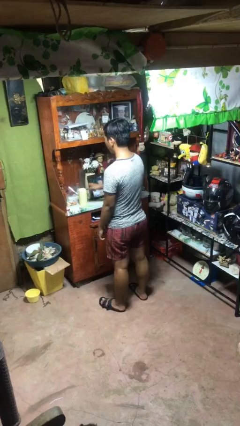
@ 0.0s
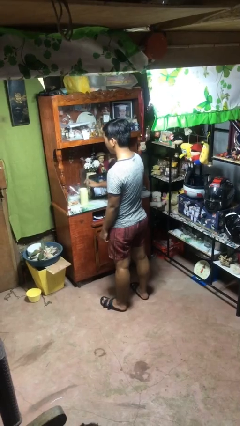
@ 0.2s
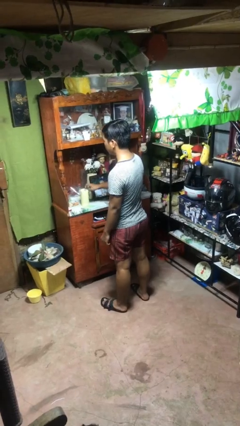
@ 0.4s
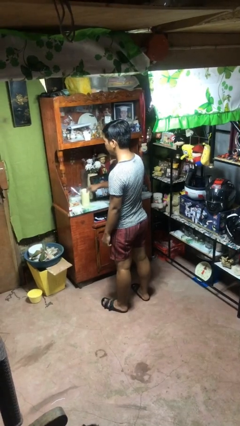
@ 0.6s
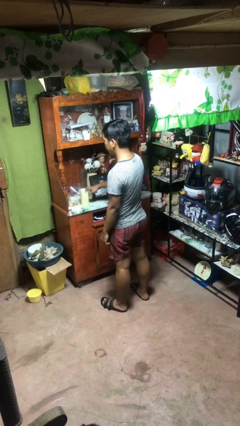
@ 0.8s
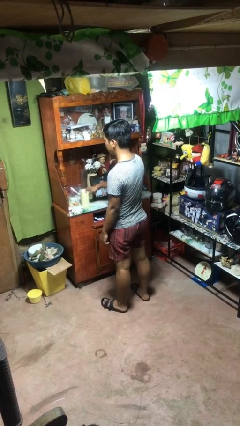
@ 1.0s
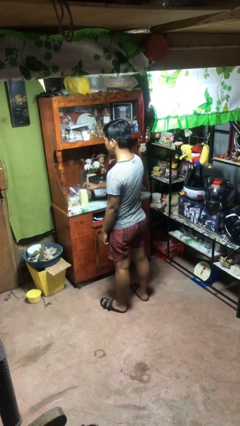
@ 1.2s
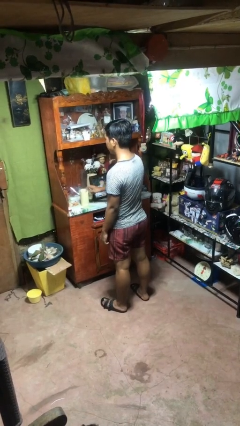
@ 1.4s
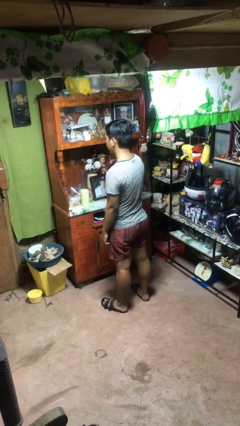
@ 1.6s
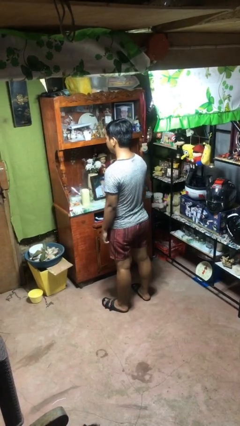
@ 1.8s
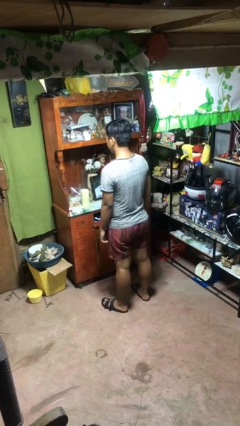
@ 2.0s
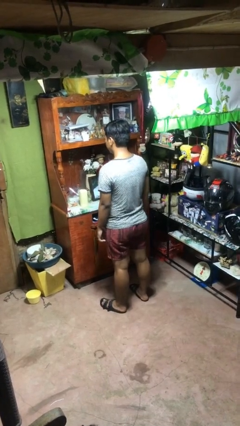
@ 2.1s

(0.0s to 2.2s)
person taps object with finger

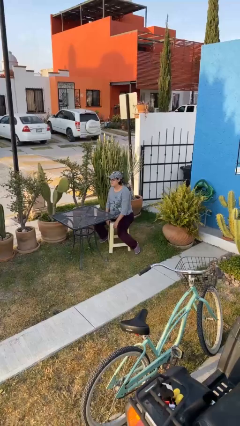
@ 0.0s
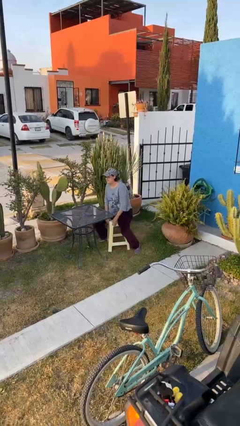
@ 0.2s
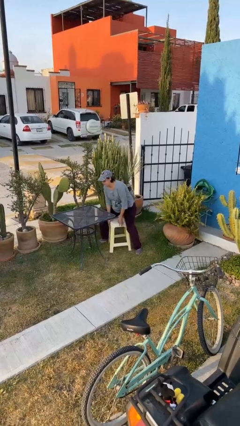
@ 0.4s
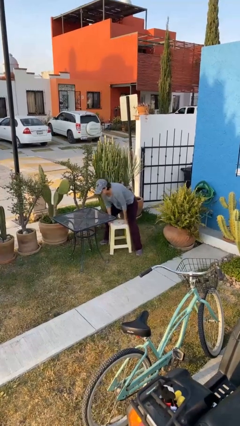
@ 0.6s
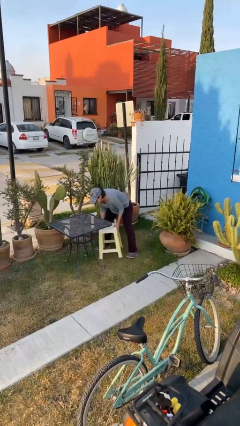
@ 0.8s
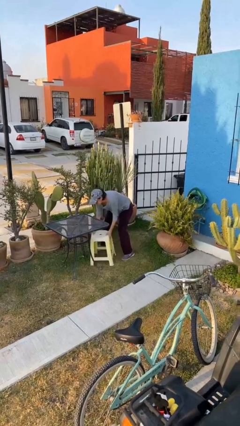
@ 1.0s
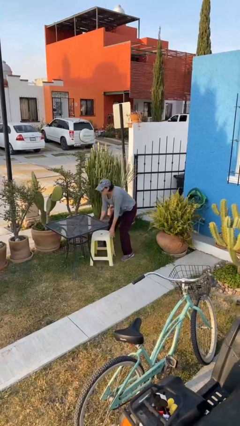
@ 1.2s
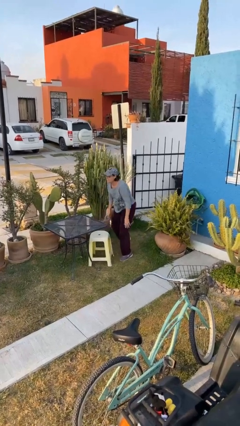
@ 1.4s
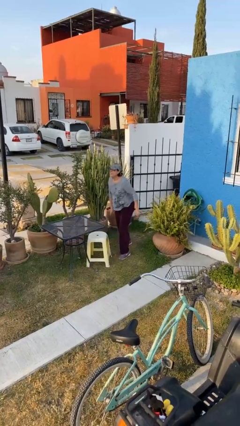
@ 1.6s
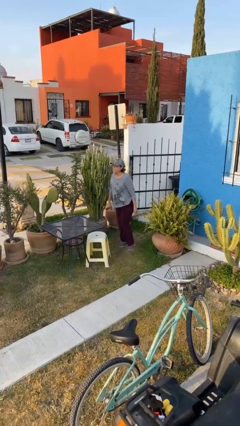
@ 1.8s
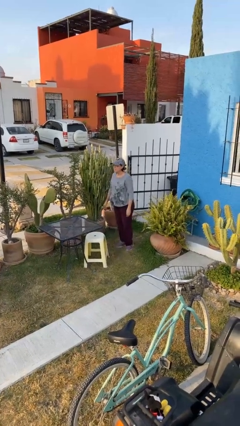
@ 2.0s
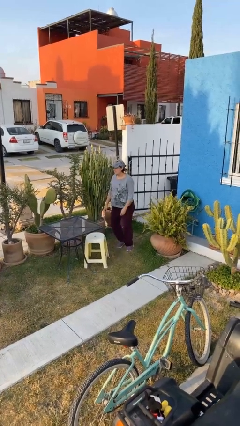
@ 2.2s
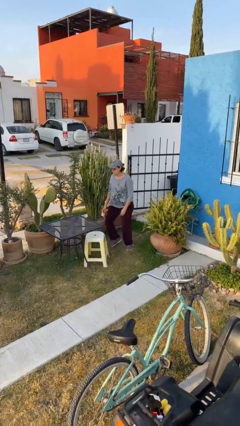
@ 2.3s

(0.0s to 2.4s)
person stands up

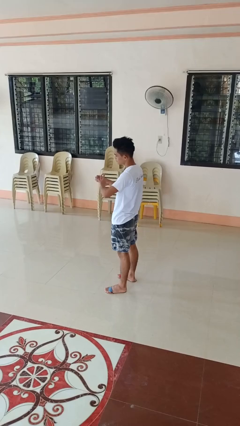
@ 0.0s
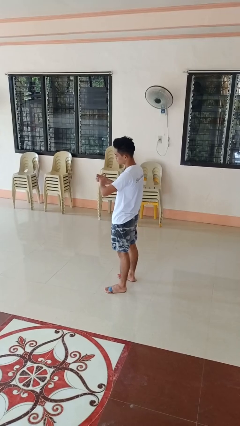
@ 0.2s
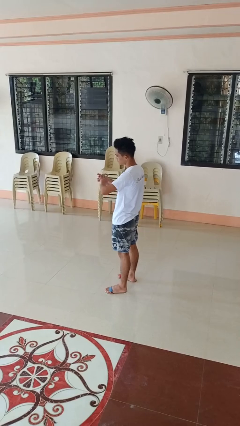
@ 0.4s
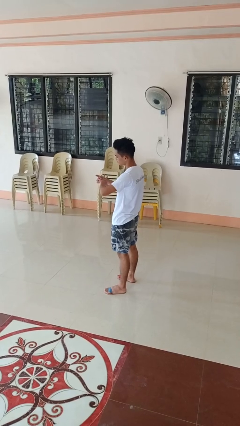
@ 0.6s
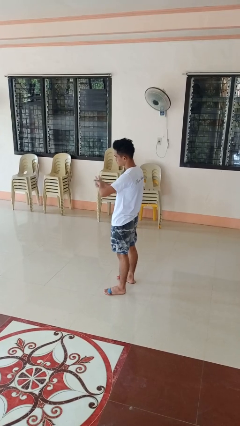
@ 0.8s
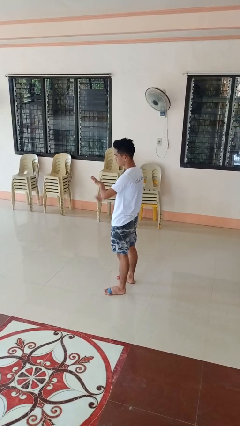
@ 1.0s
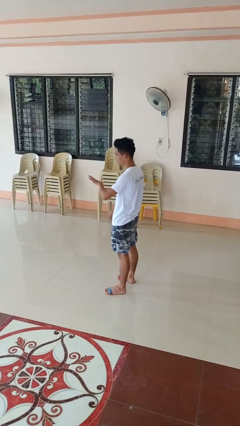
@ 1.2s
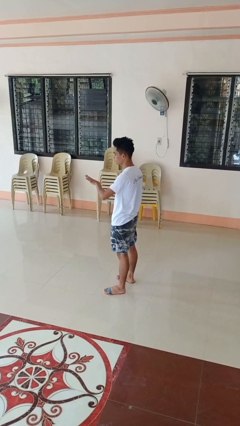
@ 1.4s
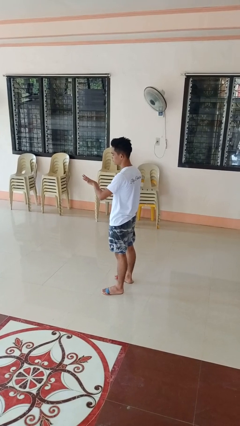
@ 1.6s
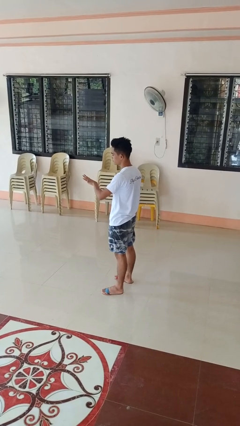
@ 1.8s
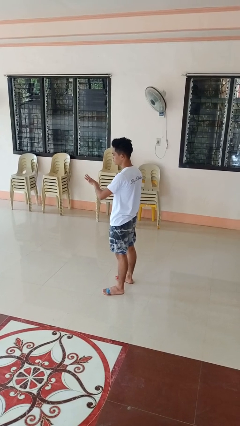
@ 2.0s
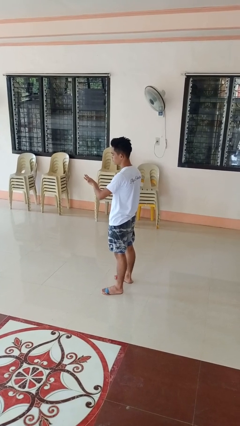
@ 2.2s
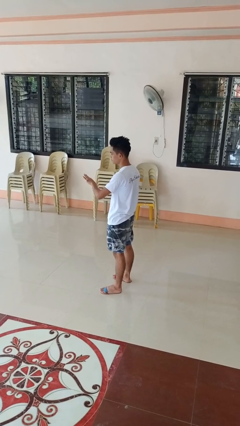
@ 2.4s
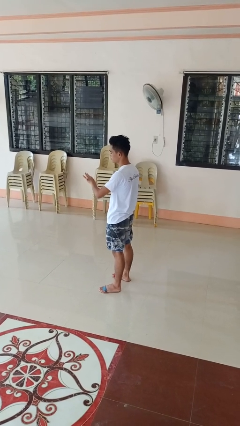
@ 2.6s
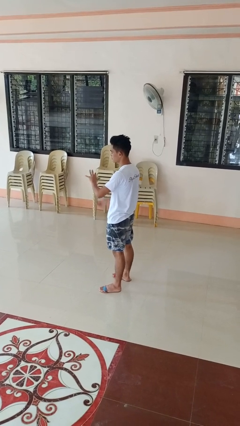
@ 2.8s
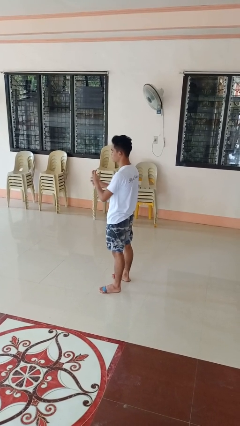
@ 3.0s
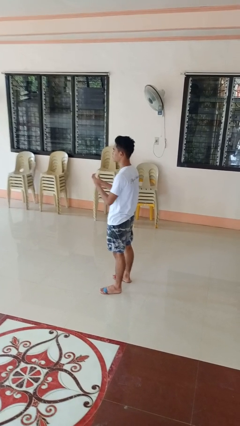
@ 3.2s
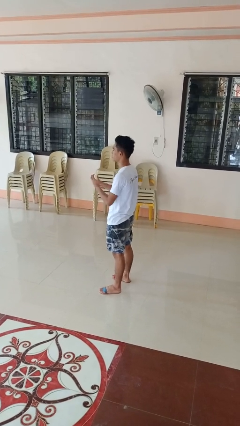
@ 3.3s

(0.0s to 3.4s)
person puts on ring

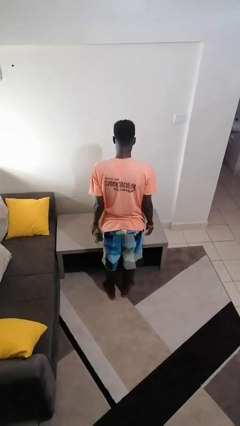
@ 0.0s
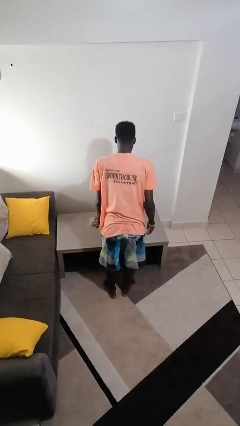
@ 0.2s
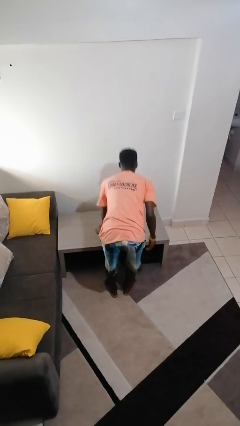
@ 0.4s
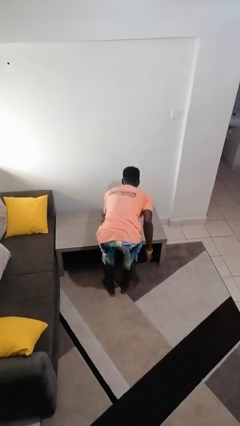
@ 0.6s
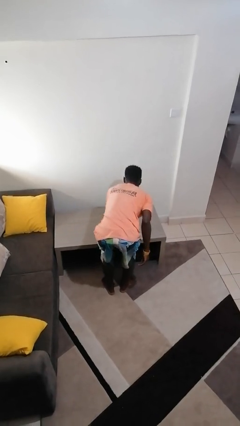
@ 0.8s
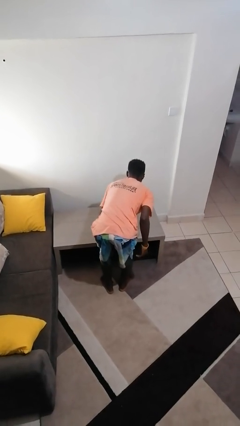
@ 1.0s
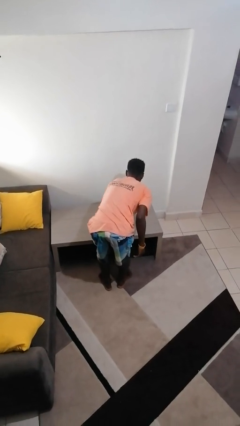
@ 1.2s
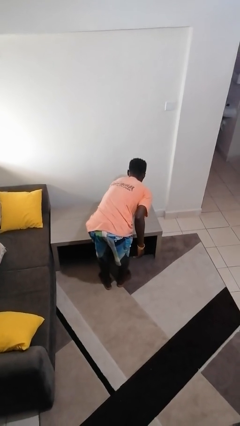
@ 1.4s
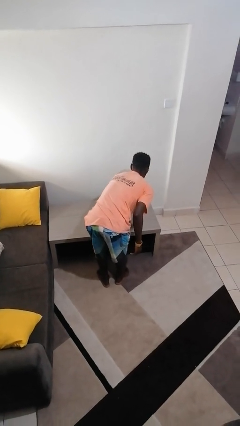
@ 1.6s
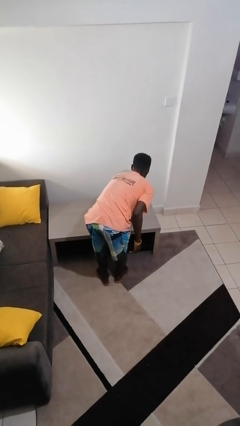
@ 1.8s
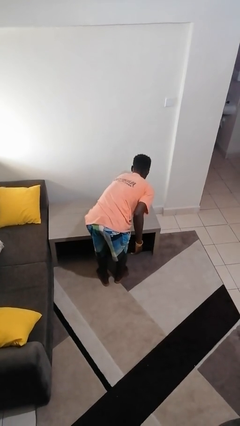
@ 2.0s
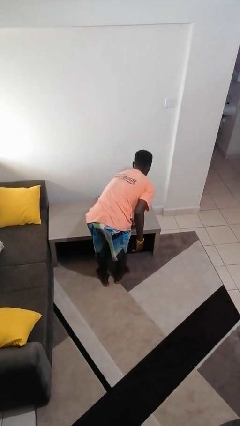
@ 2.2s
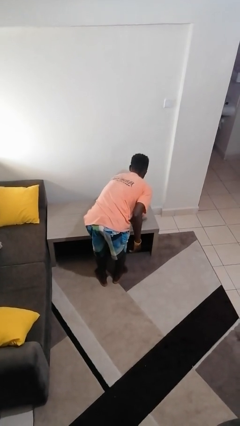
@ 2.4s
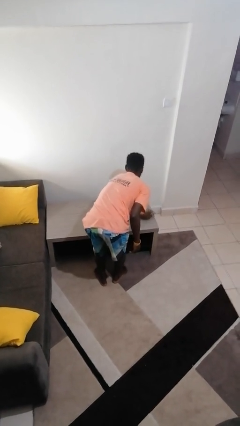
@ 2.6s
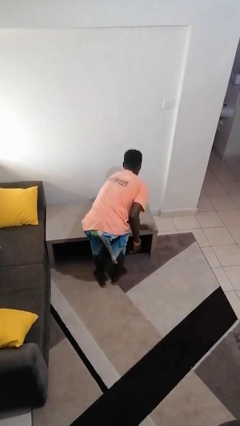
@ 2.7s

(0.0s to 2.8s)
person cleans table with rag

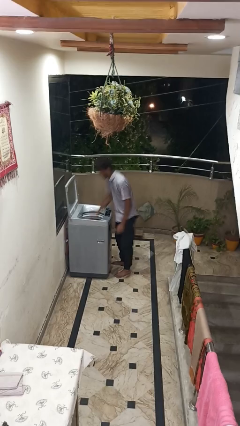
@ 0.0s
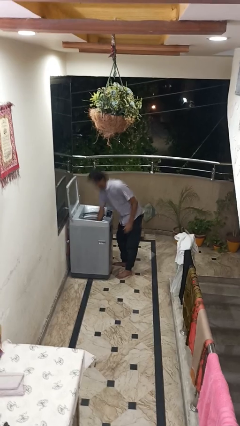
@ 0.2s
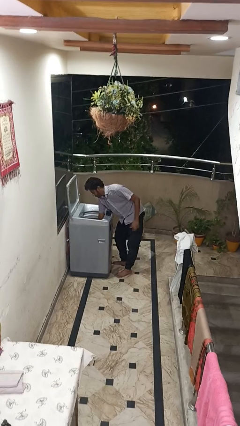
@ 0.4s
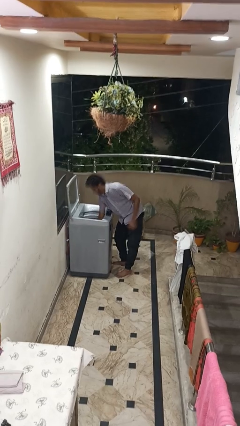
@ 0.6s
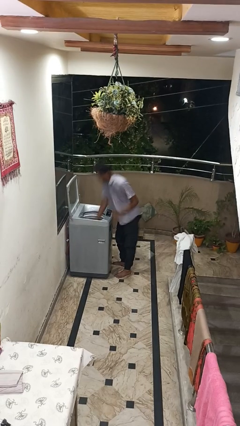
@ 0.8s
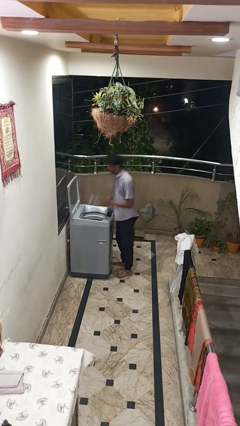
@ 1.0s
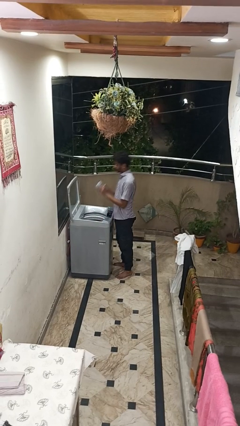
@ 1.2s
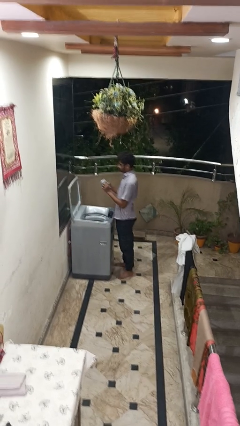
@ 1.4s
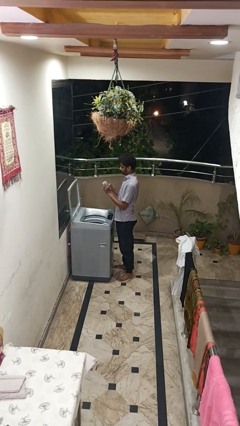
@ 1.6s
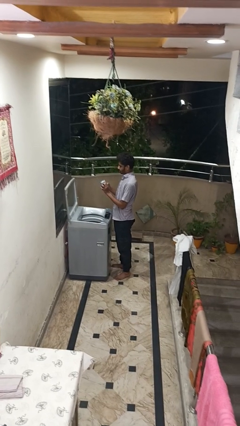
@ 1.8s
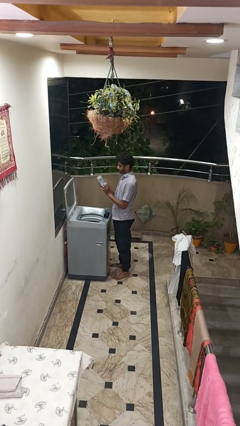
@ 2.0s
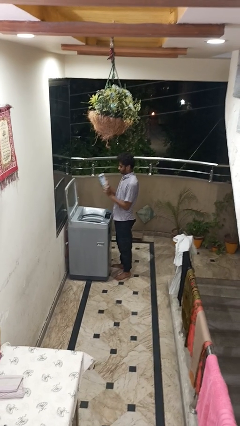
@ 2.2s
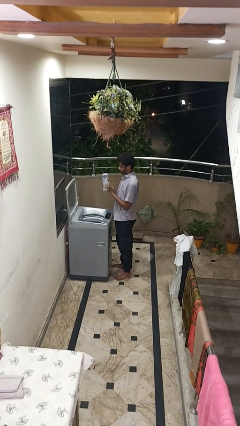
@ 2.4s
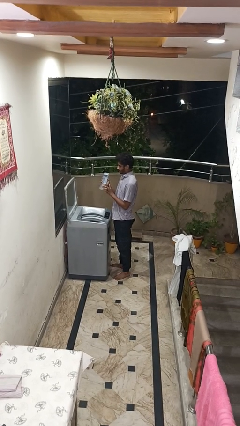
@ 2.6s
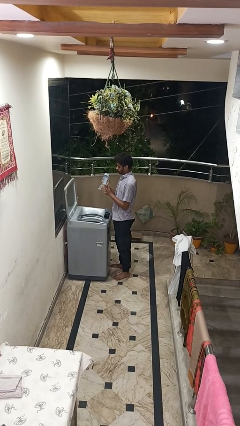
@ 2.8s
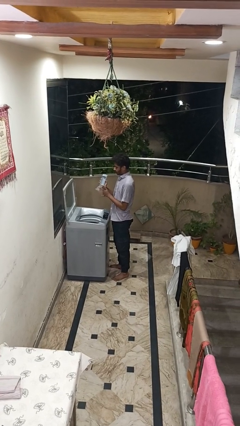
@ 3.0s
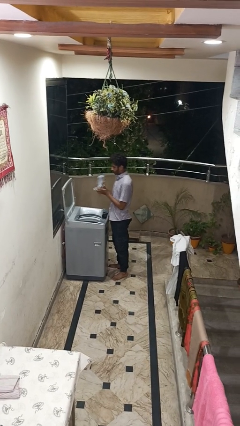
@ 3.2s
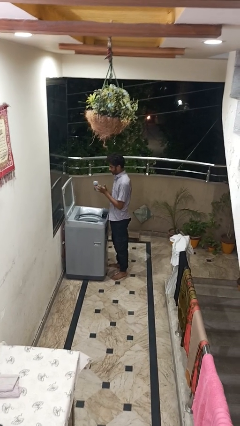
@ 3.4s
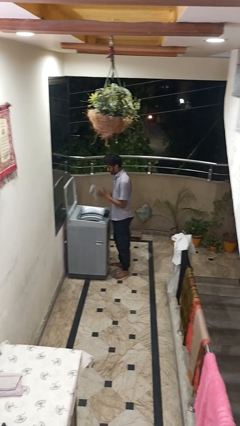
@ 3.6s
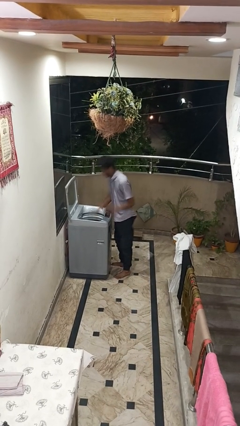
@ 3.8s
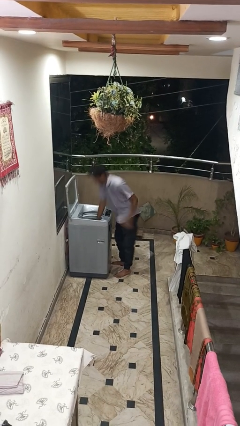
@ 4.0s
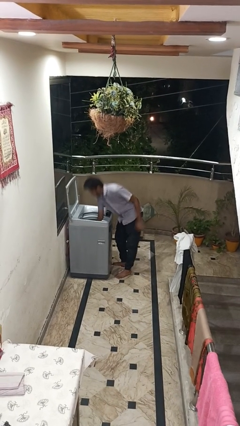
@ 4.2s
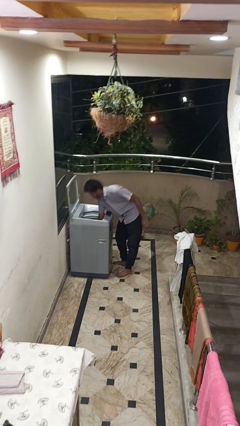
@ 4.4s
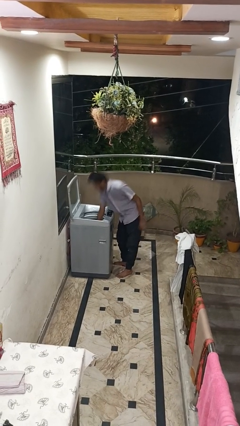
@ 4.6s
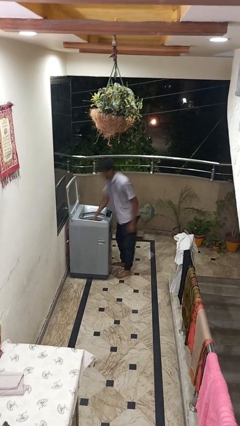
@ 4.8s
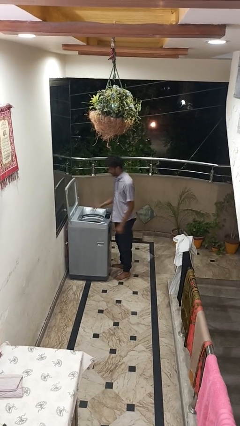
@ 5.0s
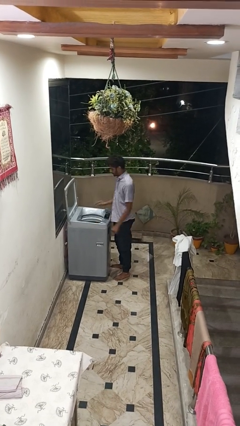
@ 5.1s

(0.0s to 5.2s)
person cleans dryer lint trap

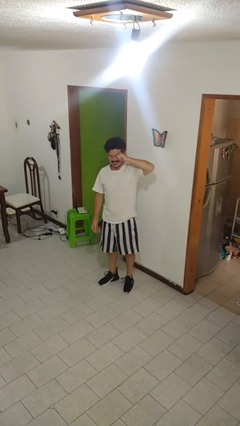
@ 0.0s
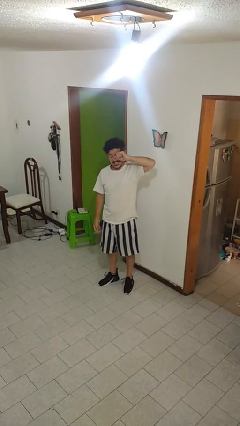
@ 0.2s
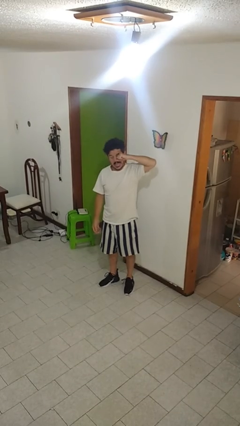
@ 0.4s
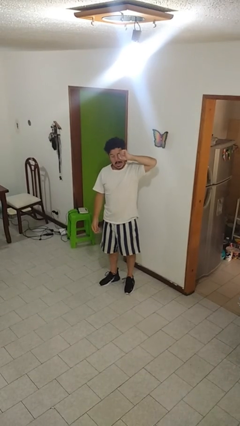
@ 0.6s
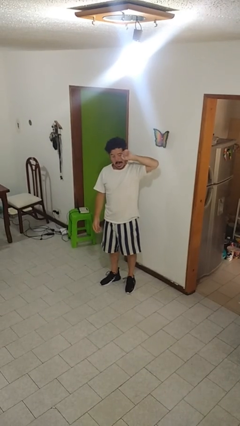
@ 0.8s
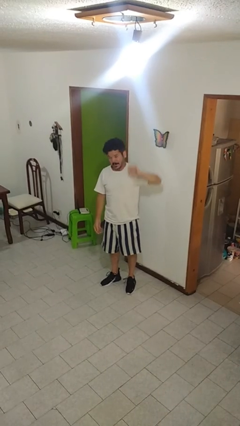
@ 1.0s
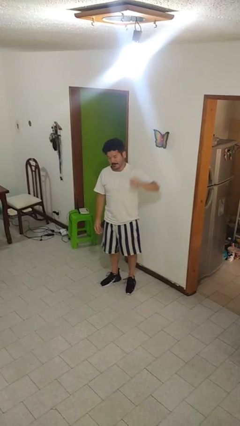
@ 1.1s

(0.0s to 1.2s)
person rubs eyes

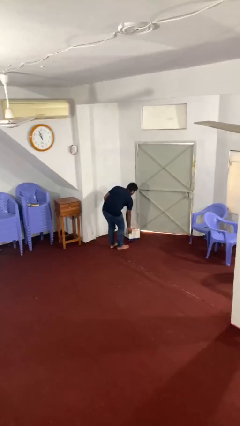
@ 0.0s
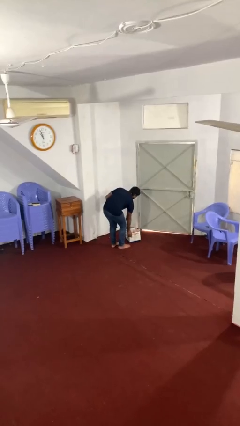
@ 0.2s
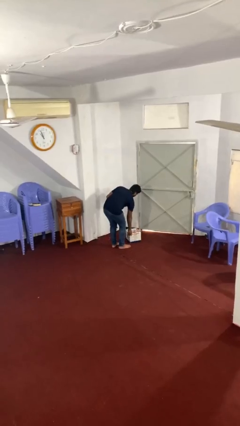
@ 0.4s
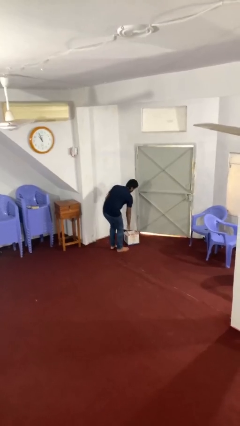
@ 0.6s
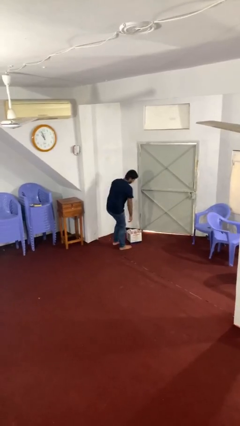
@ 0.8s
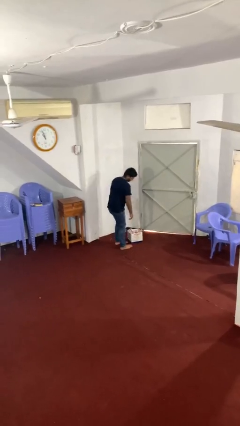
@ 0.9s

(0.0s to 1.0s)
person puts down object on floor
